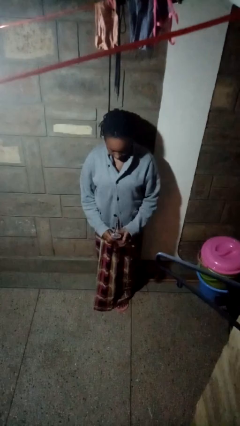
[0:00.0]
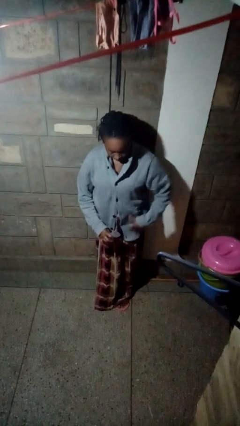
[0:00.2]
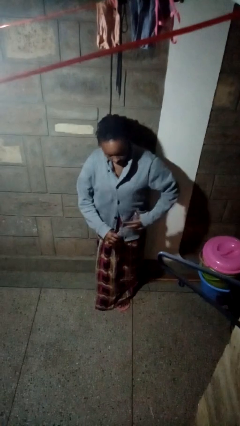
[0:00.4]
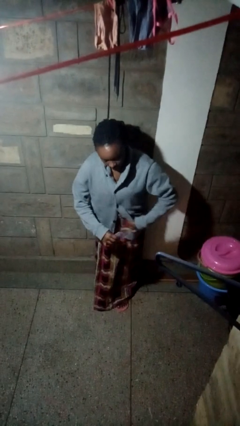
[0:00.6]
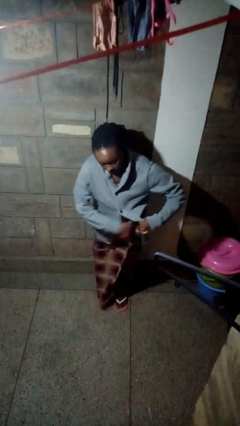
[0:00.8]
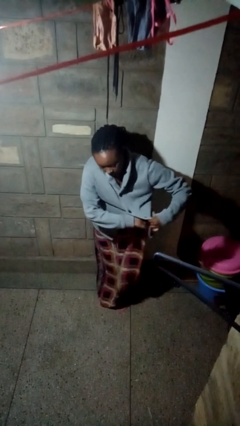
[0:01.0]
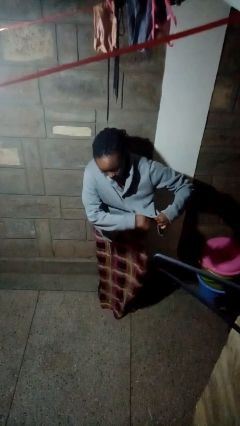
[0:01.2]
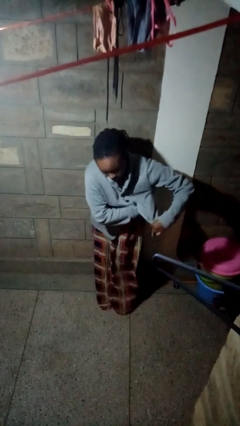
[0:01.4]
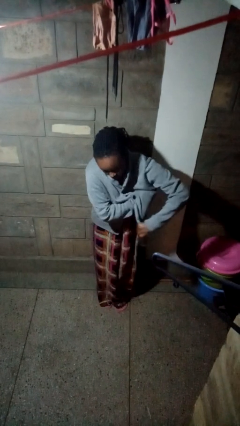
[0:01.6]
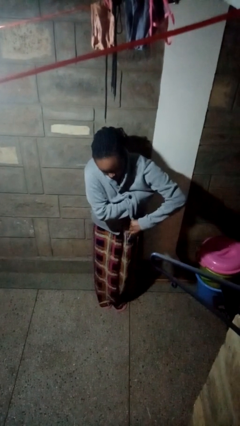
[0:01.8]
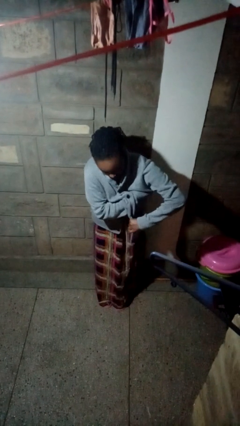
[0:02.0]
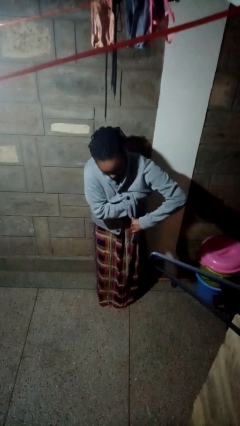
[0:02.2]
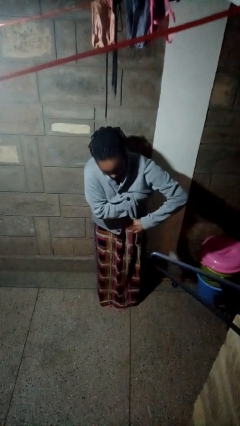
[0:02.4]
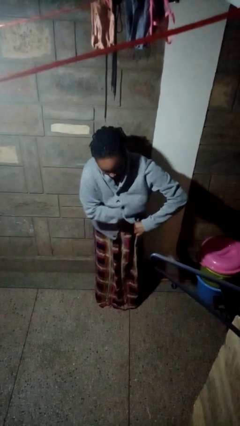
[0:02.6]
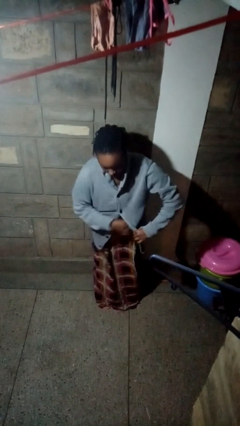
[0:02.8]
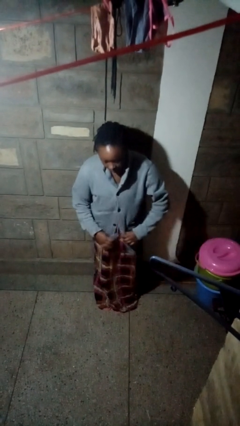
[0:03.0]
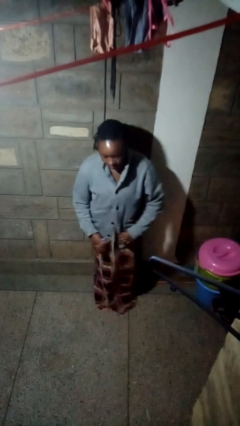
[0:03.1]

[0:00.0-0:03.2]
person applies deodorant

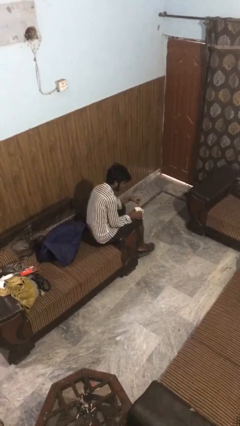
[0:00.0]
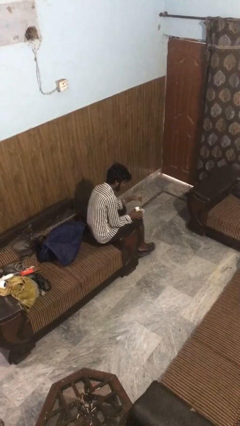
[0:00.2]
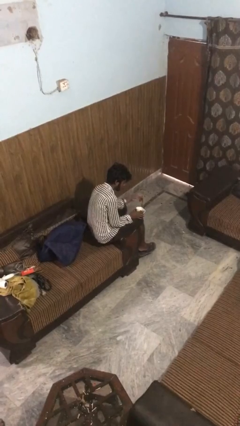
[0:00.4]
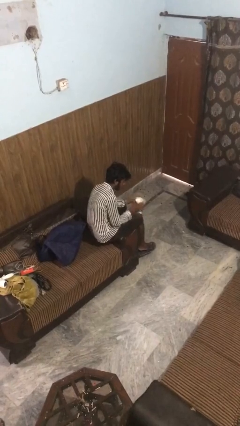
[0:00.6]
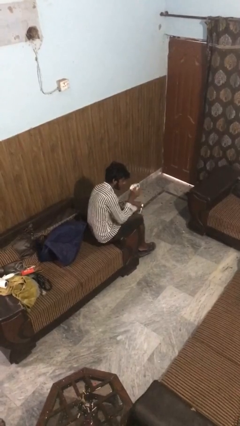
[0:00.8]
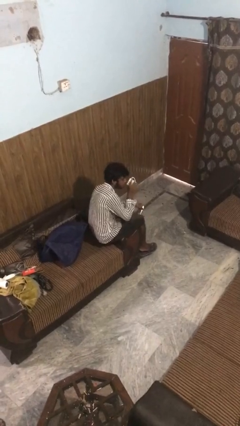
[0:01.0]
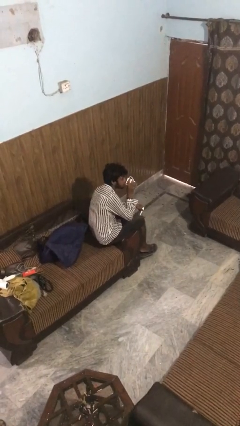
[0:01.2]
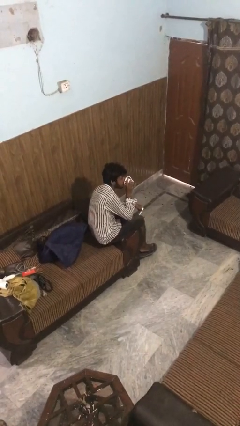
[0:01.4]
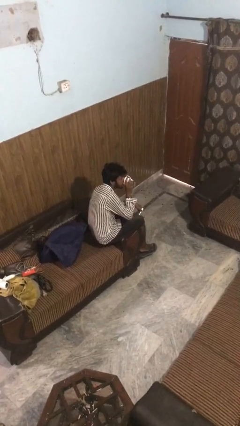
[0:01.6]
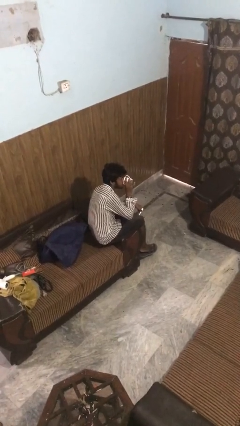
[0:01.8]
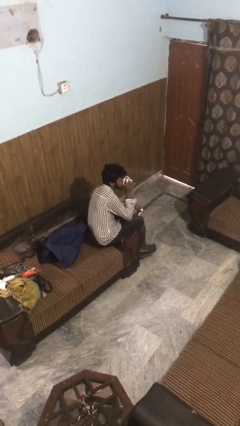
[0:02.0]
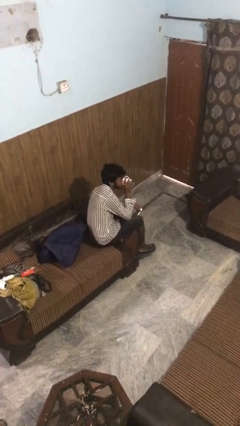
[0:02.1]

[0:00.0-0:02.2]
person drinks from mug

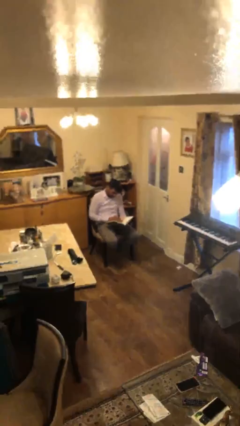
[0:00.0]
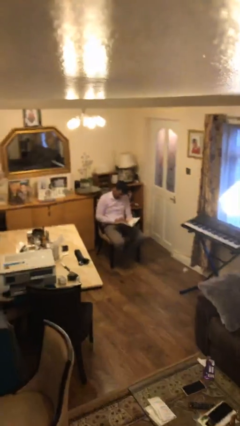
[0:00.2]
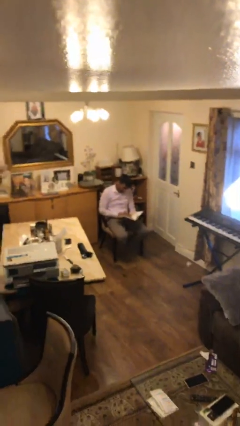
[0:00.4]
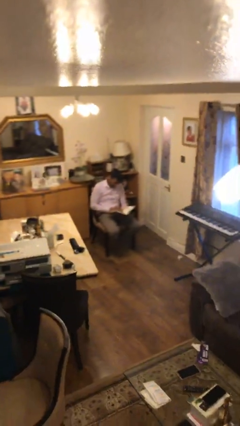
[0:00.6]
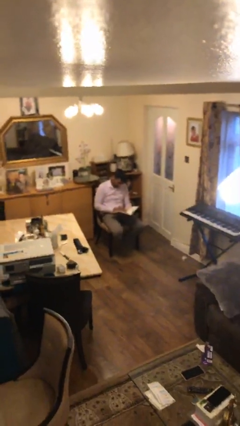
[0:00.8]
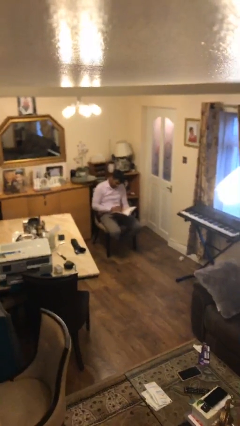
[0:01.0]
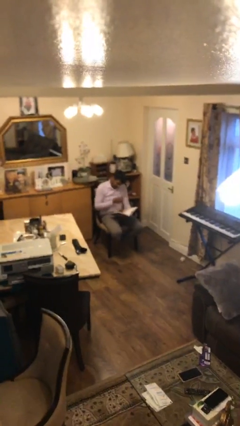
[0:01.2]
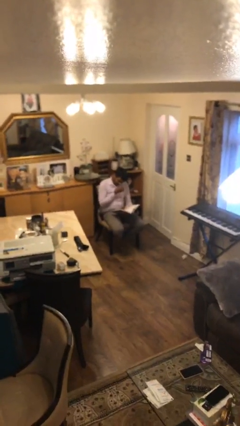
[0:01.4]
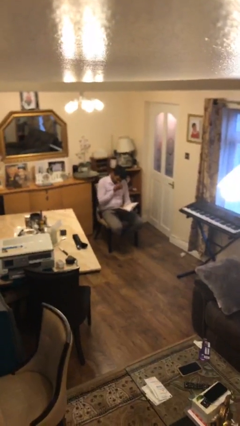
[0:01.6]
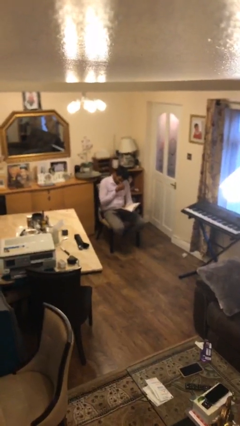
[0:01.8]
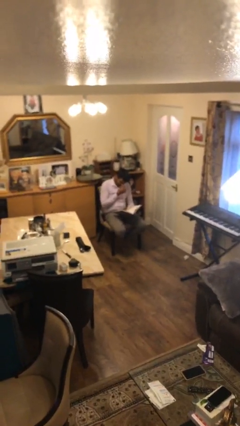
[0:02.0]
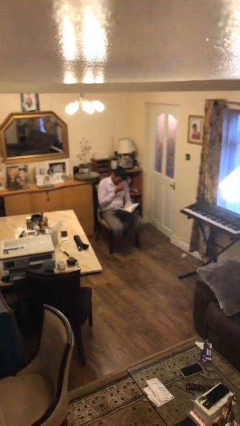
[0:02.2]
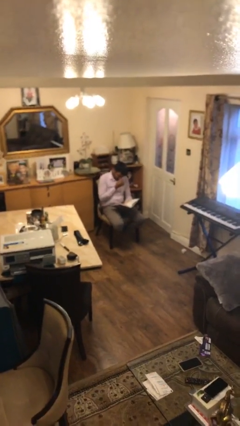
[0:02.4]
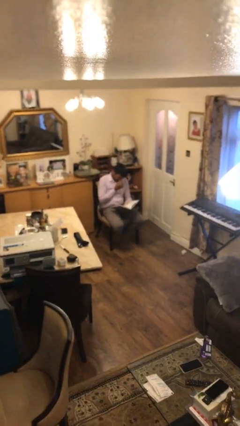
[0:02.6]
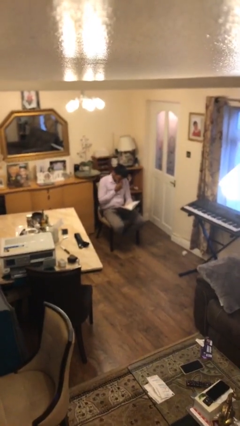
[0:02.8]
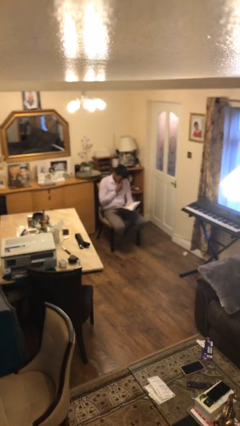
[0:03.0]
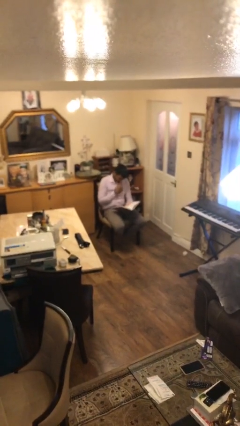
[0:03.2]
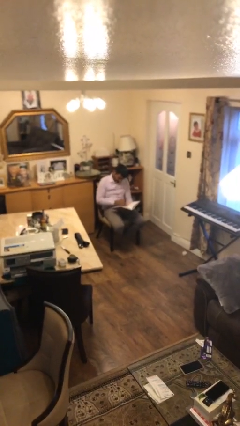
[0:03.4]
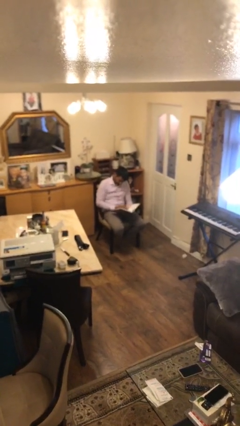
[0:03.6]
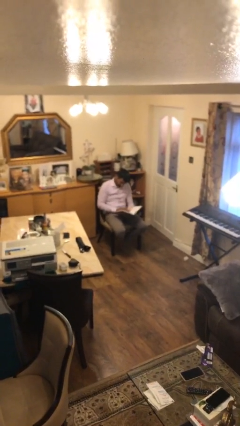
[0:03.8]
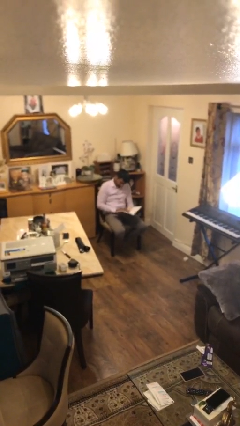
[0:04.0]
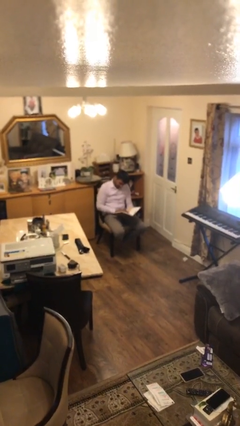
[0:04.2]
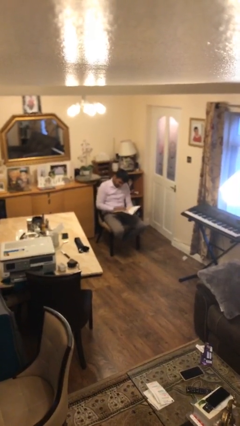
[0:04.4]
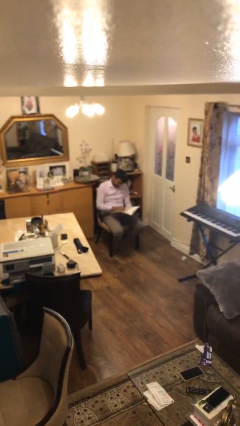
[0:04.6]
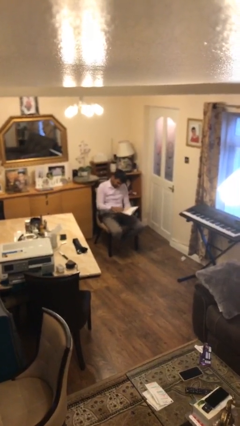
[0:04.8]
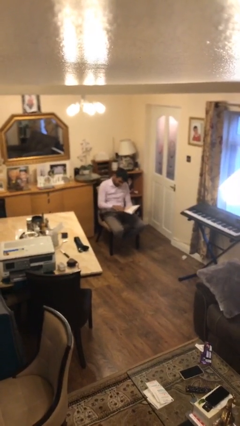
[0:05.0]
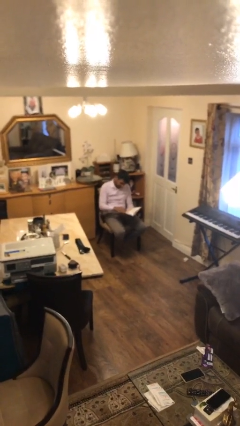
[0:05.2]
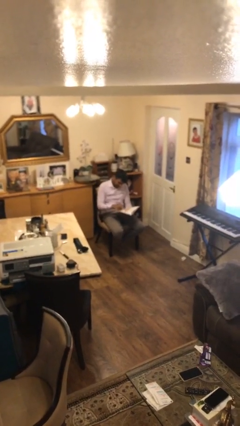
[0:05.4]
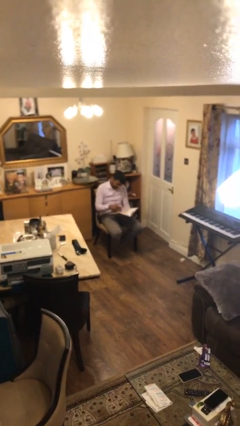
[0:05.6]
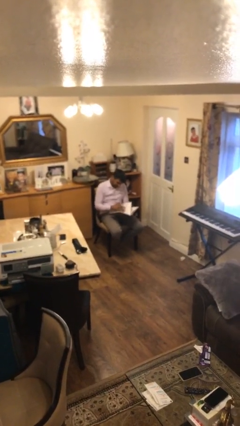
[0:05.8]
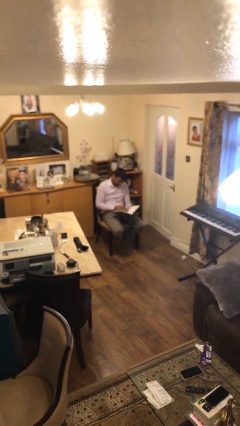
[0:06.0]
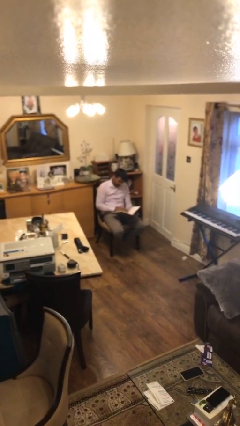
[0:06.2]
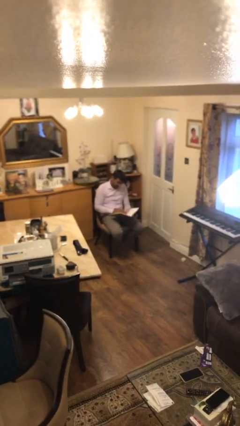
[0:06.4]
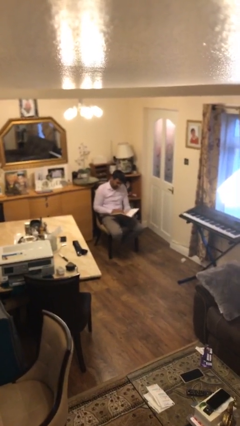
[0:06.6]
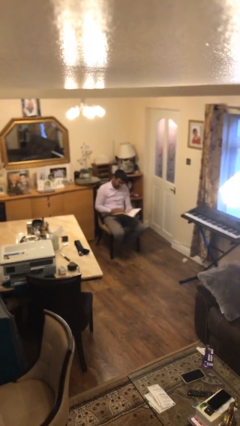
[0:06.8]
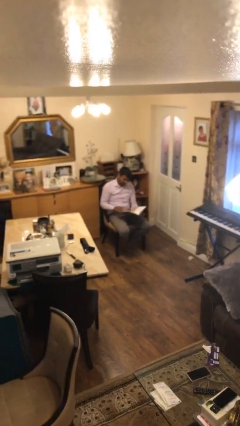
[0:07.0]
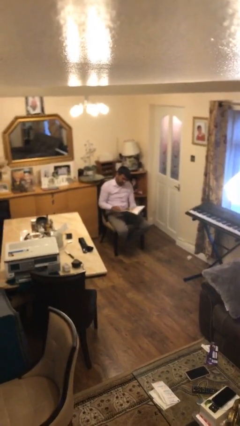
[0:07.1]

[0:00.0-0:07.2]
person reads document

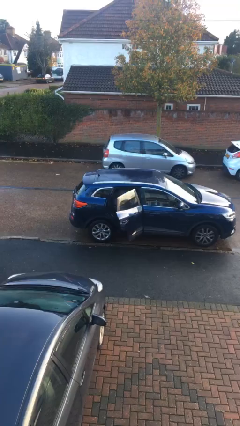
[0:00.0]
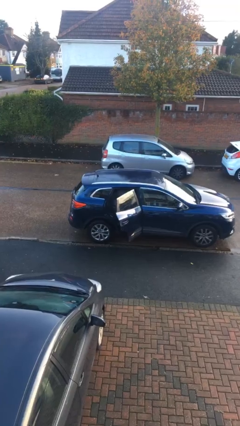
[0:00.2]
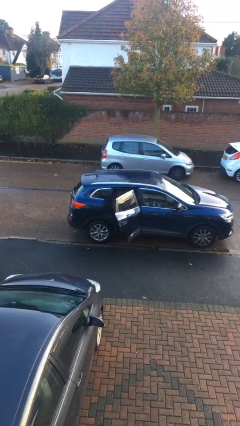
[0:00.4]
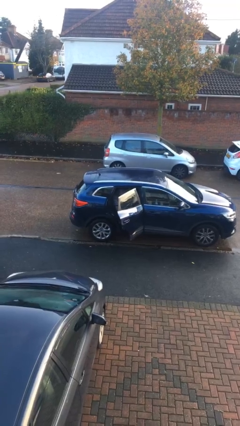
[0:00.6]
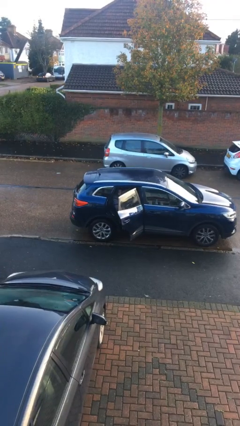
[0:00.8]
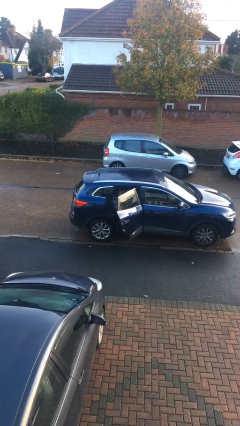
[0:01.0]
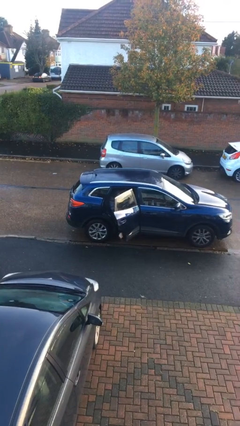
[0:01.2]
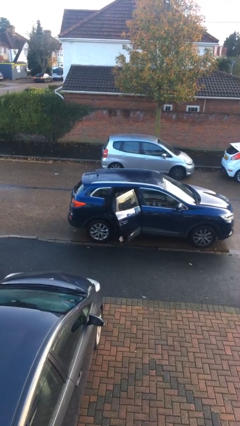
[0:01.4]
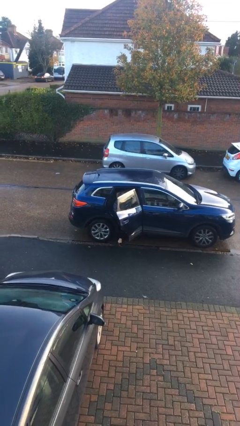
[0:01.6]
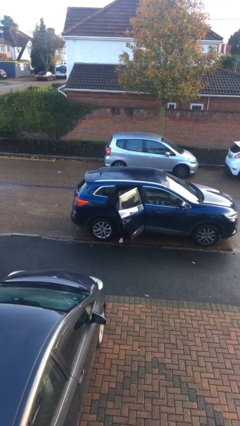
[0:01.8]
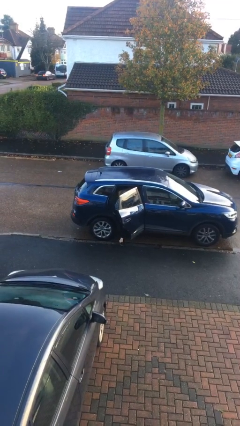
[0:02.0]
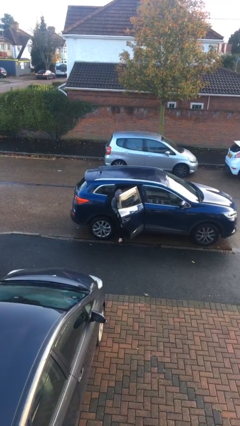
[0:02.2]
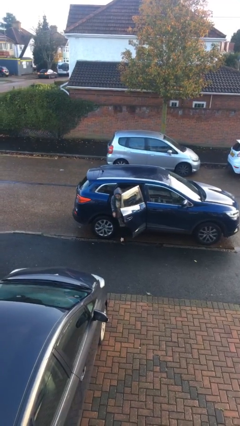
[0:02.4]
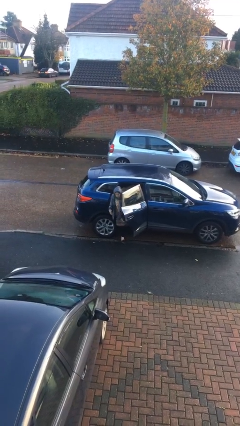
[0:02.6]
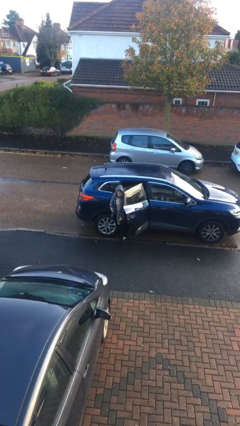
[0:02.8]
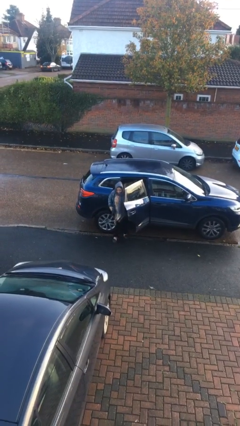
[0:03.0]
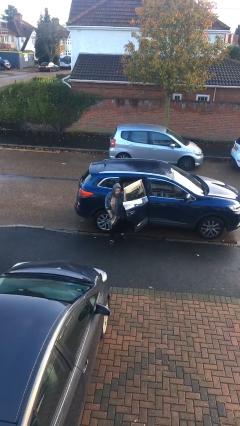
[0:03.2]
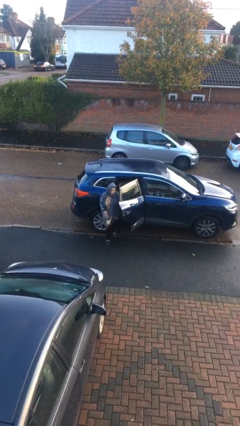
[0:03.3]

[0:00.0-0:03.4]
person exits car

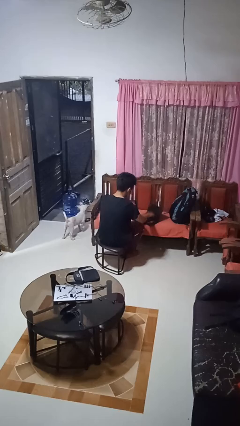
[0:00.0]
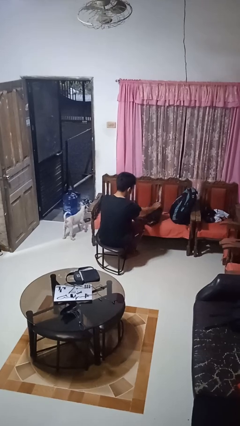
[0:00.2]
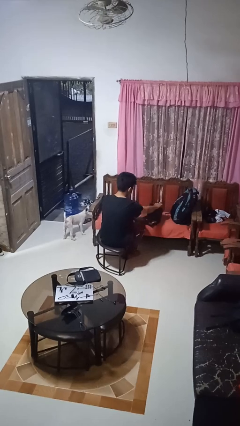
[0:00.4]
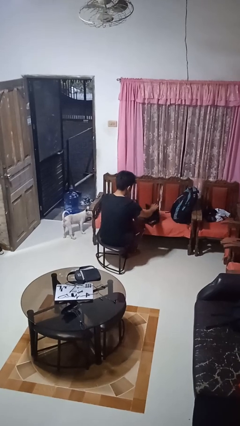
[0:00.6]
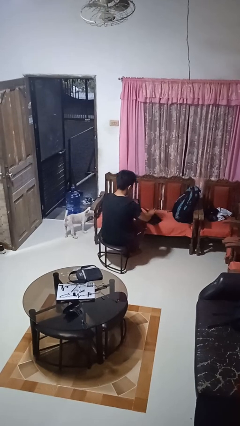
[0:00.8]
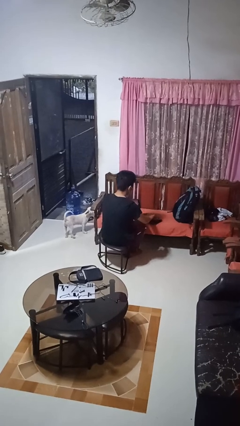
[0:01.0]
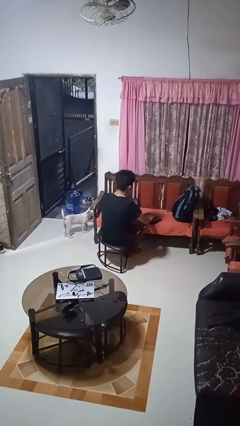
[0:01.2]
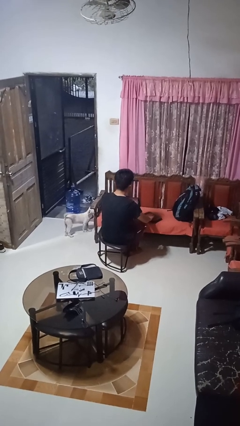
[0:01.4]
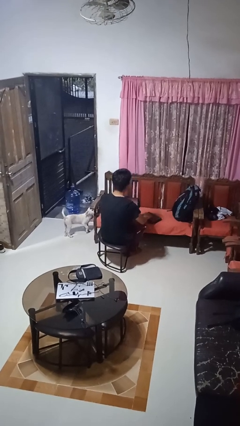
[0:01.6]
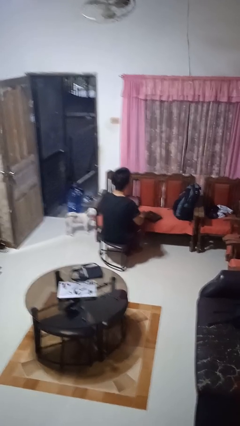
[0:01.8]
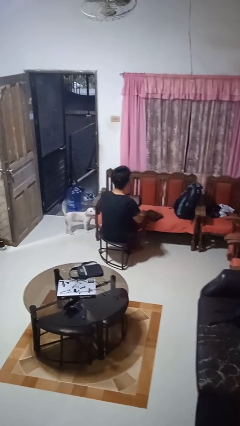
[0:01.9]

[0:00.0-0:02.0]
person closes laptop
